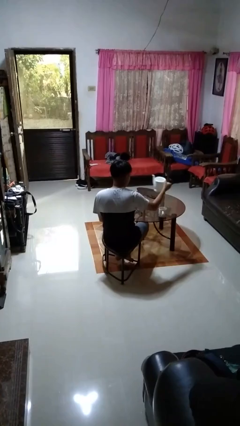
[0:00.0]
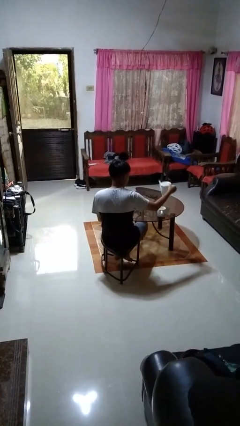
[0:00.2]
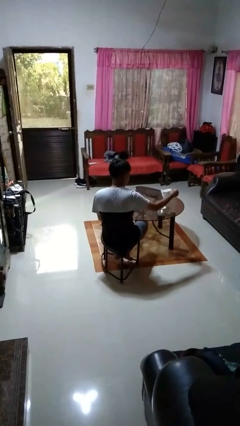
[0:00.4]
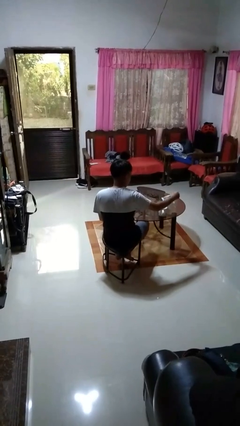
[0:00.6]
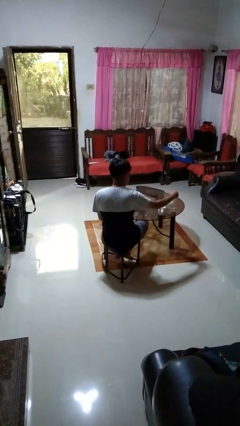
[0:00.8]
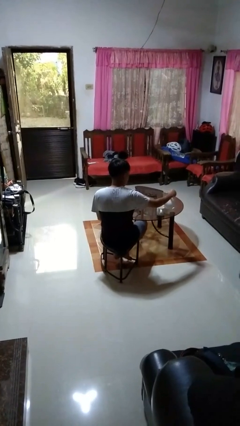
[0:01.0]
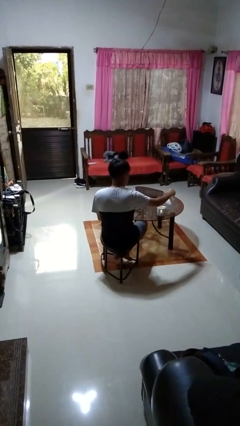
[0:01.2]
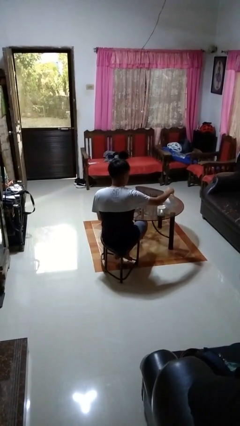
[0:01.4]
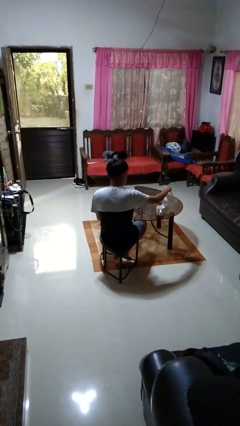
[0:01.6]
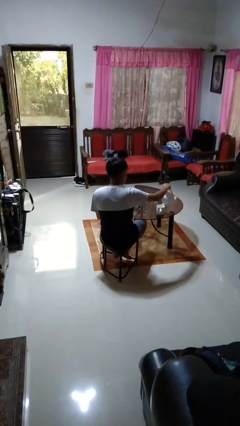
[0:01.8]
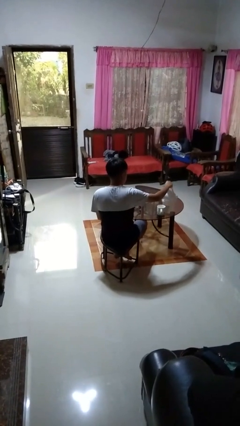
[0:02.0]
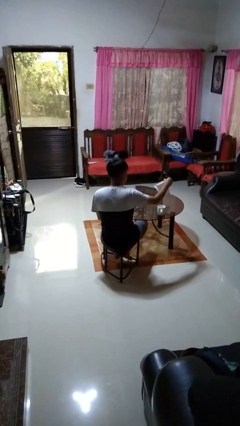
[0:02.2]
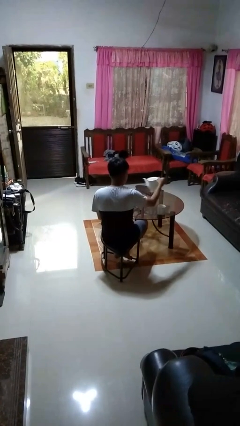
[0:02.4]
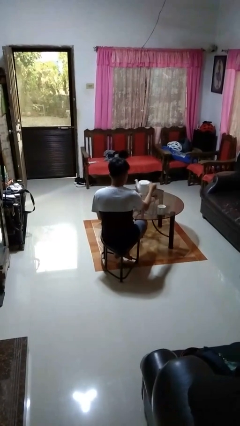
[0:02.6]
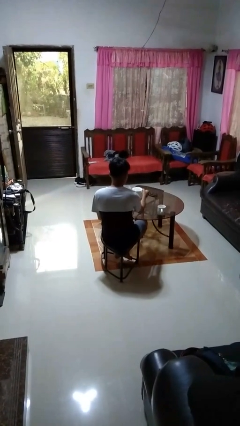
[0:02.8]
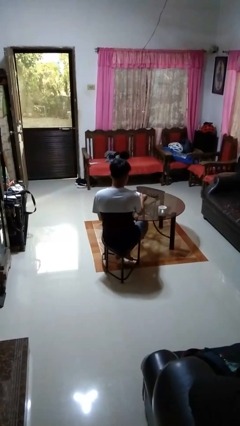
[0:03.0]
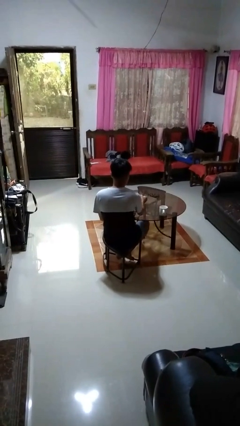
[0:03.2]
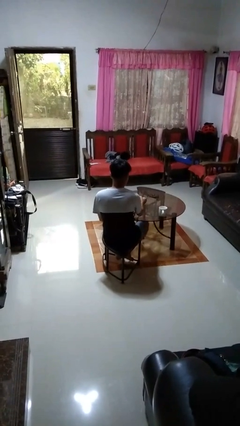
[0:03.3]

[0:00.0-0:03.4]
person pours coffee into mug

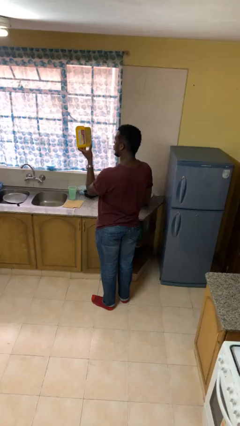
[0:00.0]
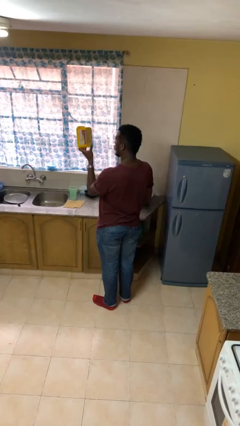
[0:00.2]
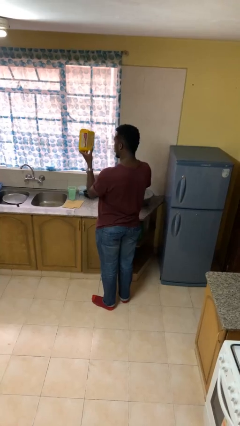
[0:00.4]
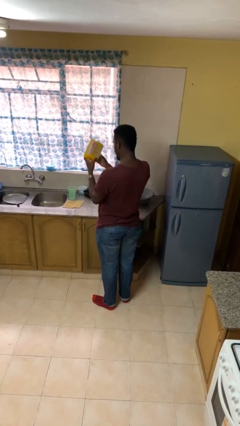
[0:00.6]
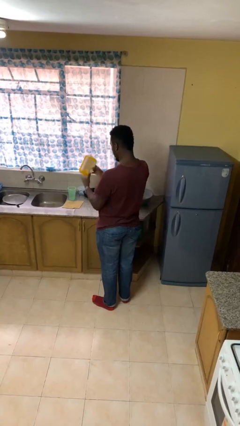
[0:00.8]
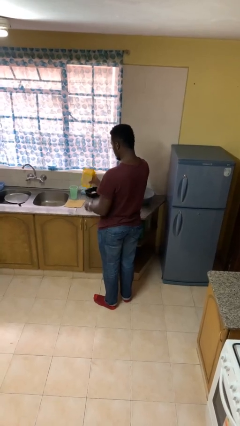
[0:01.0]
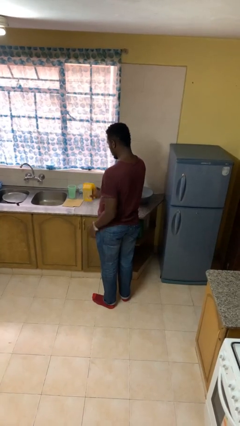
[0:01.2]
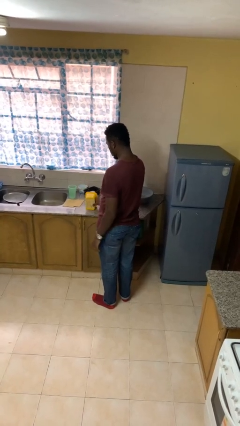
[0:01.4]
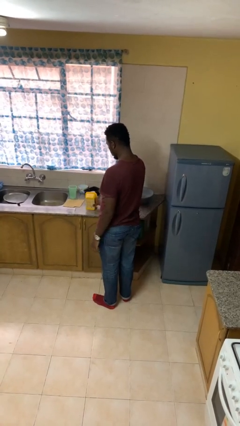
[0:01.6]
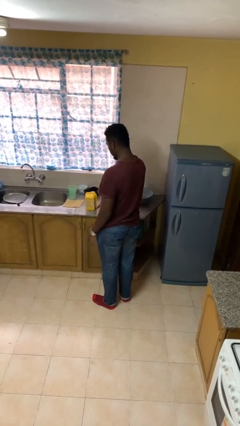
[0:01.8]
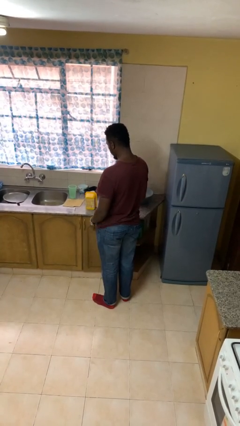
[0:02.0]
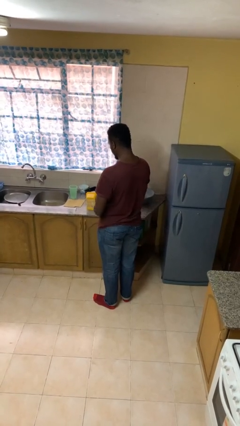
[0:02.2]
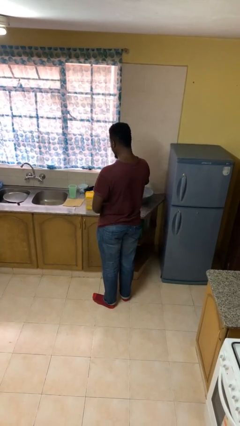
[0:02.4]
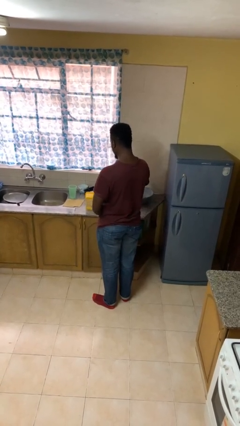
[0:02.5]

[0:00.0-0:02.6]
person puts down object on countertop

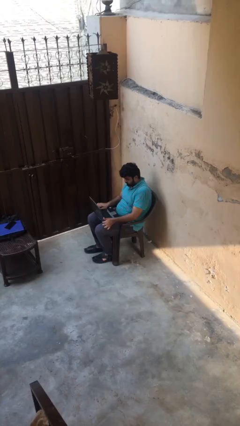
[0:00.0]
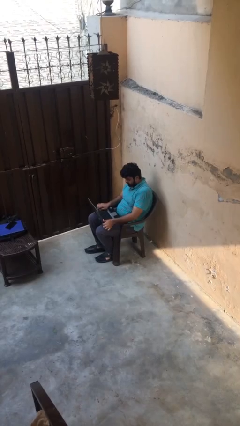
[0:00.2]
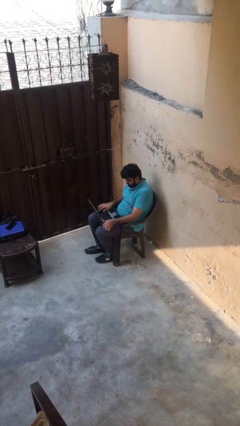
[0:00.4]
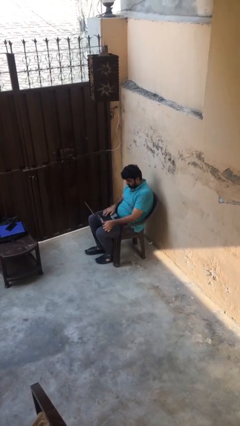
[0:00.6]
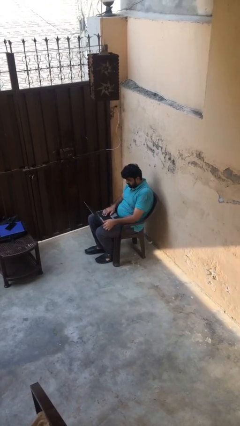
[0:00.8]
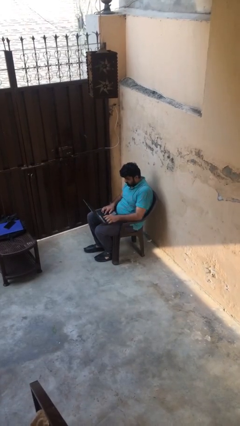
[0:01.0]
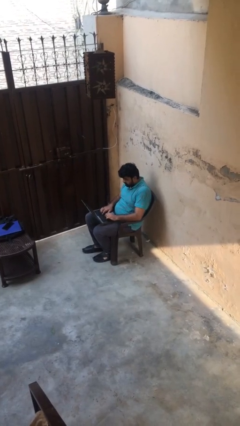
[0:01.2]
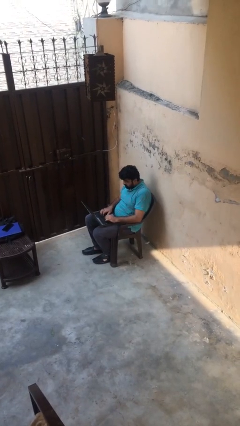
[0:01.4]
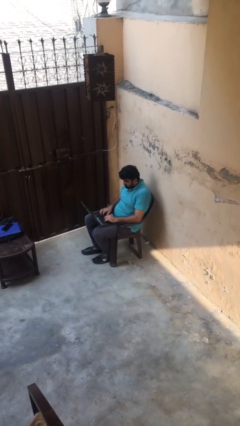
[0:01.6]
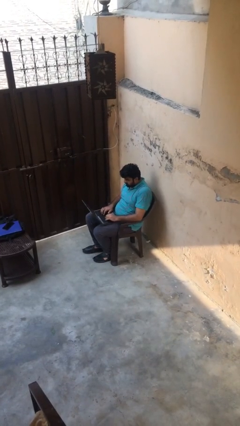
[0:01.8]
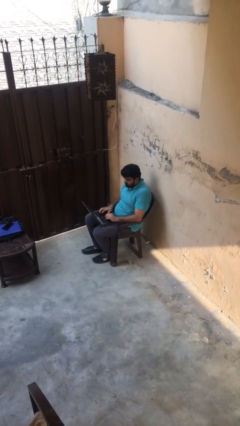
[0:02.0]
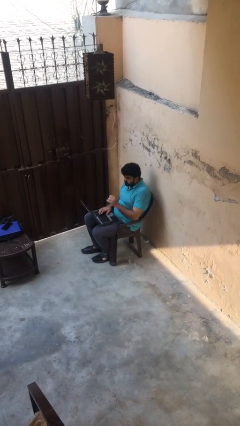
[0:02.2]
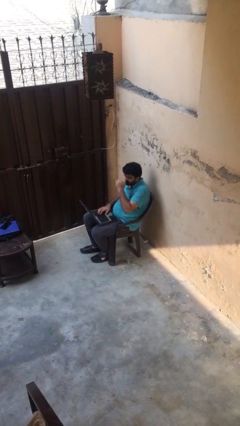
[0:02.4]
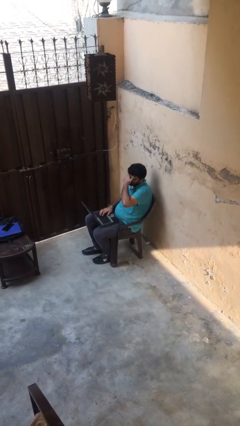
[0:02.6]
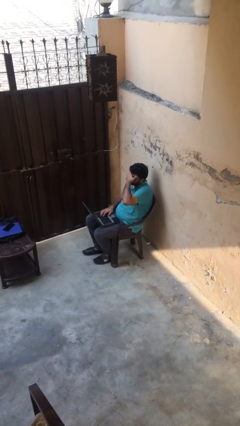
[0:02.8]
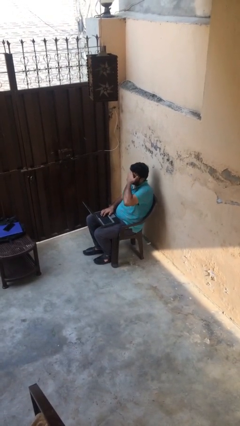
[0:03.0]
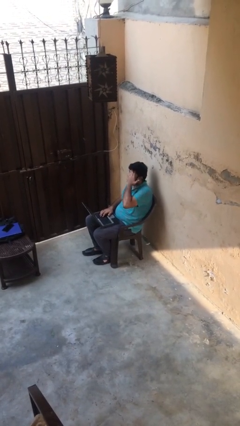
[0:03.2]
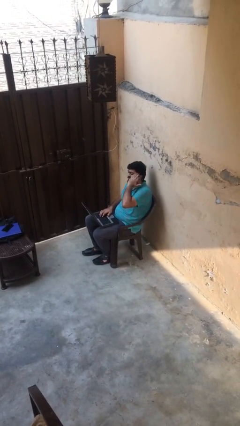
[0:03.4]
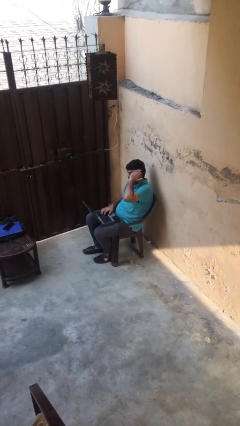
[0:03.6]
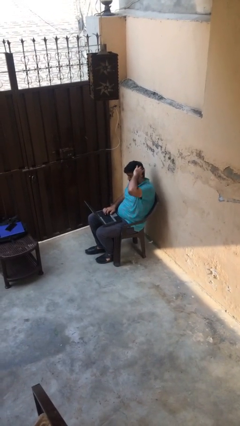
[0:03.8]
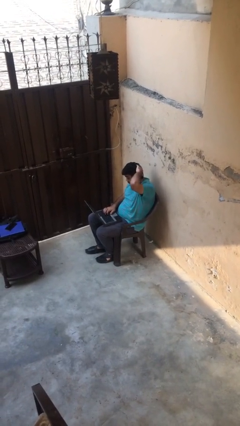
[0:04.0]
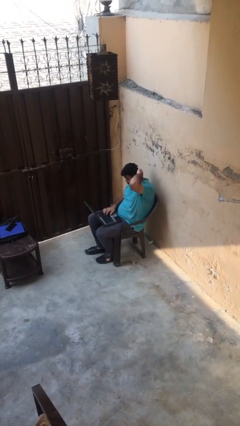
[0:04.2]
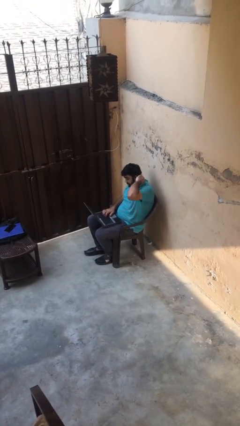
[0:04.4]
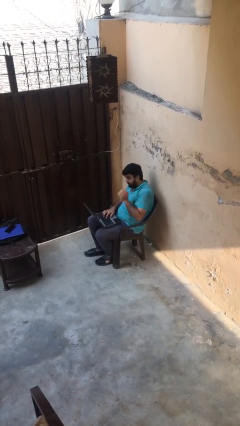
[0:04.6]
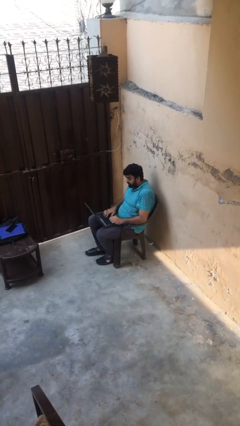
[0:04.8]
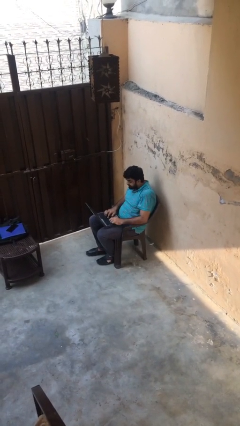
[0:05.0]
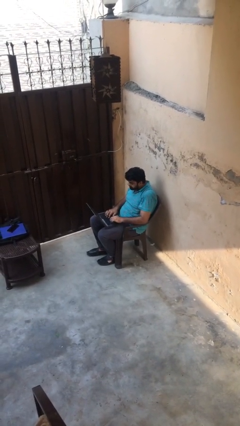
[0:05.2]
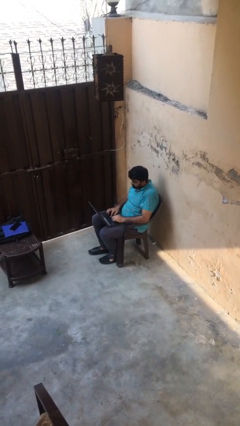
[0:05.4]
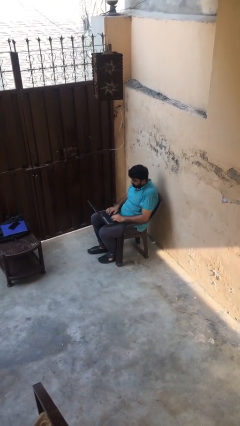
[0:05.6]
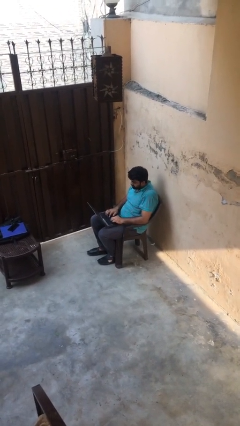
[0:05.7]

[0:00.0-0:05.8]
person interacts with laptop

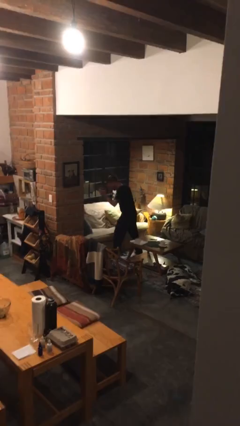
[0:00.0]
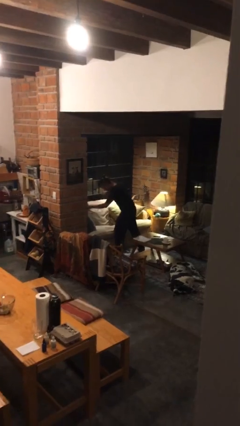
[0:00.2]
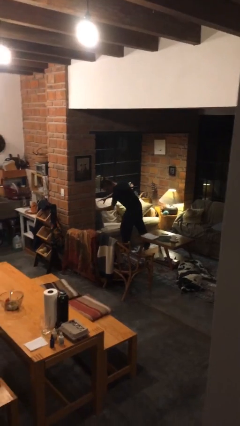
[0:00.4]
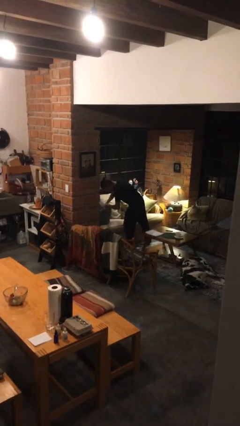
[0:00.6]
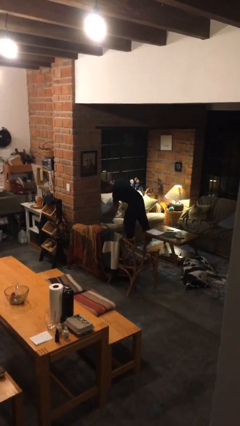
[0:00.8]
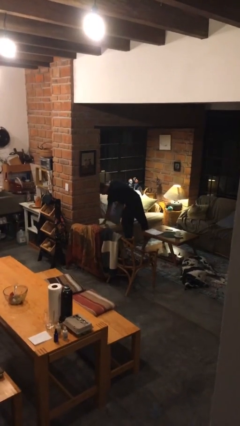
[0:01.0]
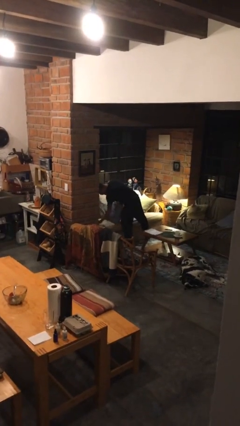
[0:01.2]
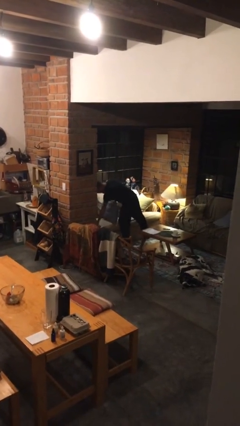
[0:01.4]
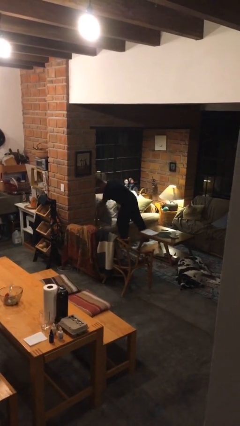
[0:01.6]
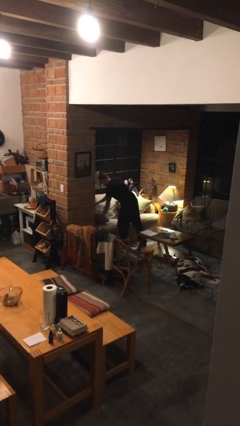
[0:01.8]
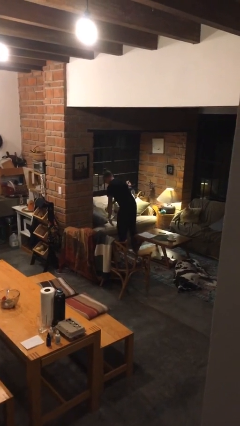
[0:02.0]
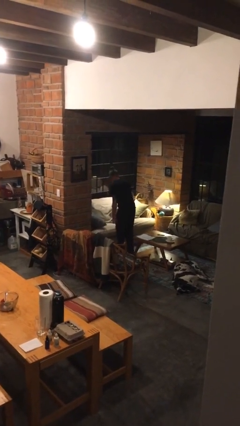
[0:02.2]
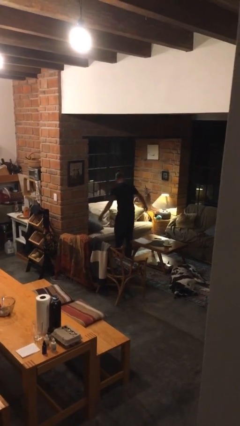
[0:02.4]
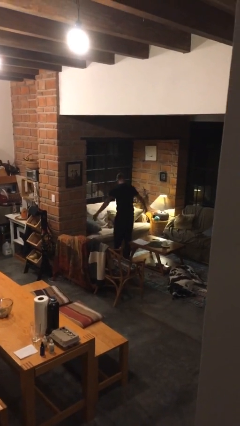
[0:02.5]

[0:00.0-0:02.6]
person searches in couch

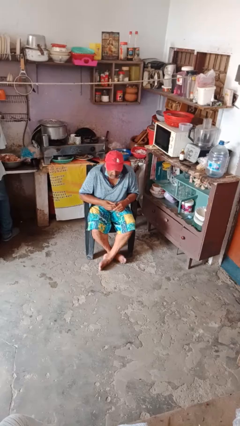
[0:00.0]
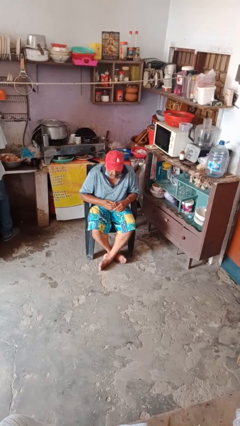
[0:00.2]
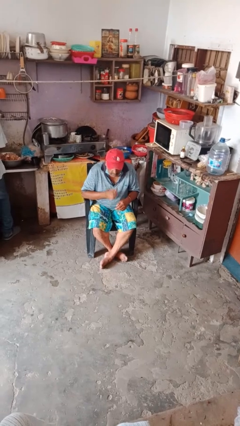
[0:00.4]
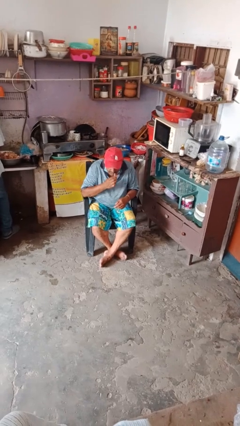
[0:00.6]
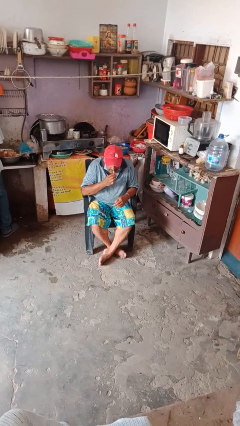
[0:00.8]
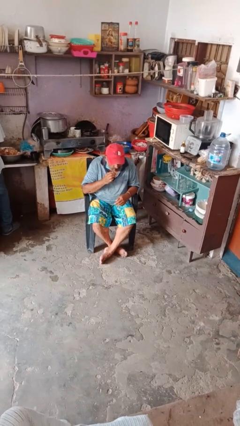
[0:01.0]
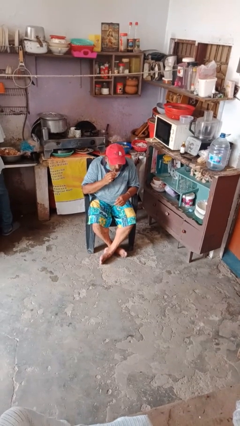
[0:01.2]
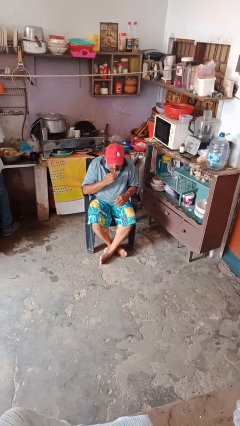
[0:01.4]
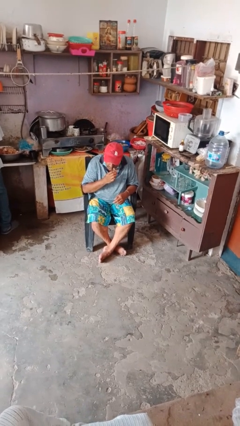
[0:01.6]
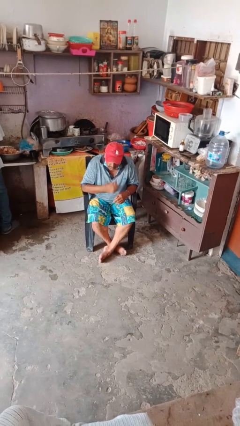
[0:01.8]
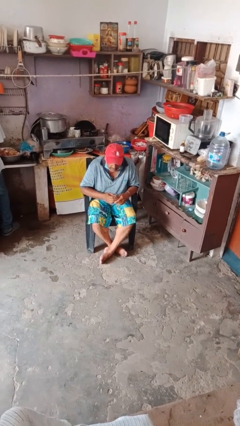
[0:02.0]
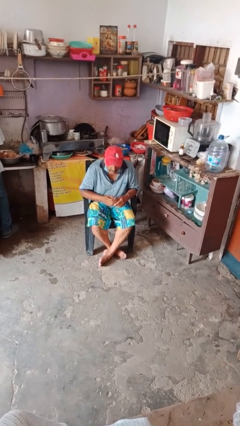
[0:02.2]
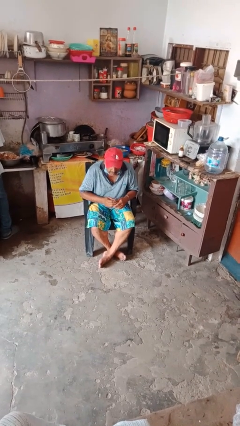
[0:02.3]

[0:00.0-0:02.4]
person applies lip makeup

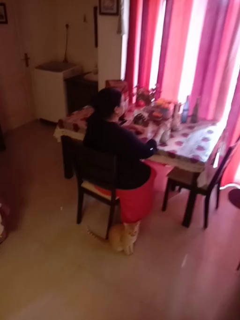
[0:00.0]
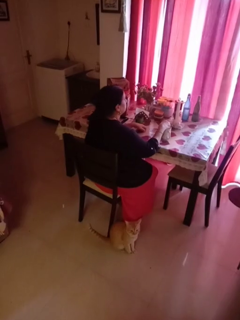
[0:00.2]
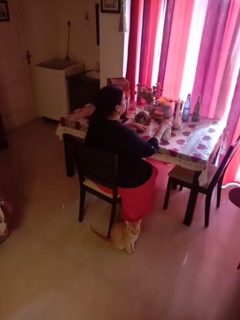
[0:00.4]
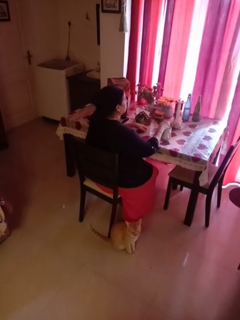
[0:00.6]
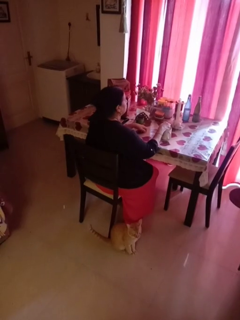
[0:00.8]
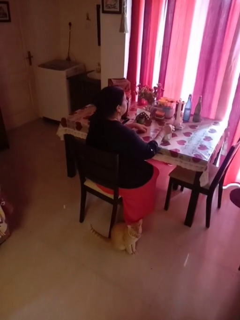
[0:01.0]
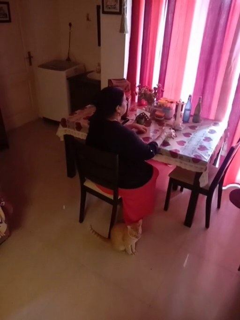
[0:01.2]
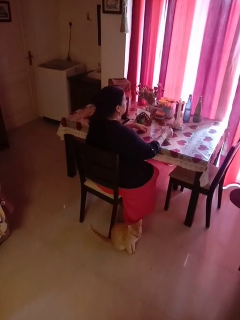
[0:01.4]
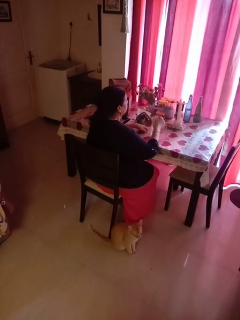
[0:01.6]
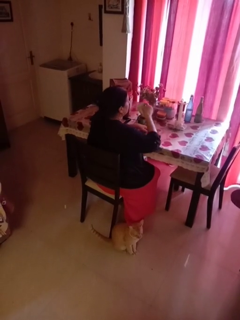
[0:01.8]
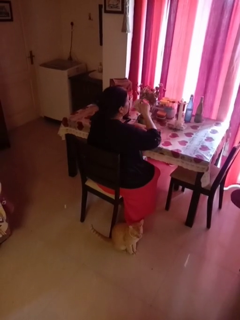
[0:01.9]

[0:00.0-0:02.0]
person stirs mug
